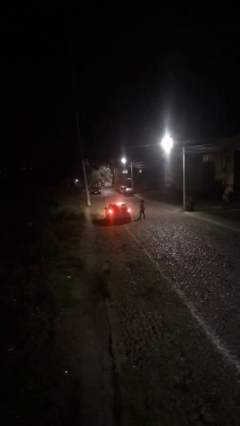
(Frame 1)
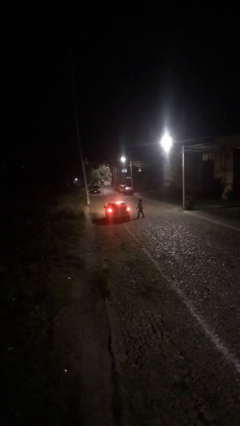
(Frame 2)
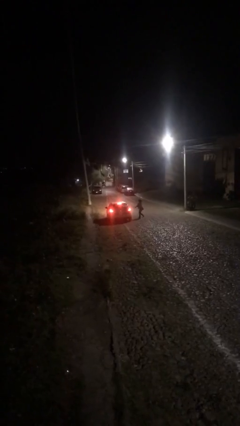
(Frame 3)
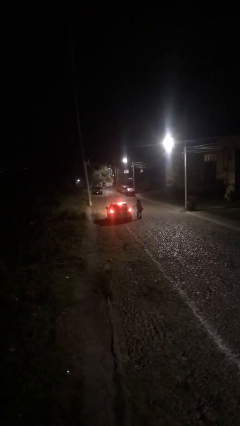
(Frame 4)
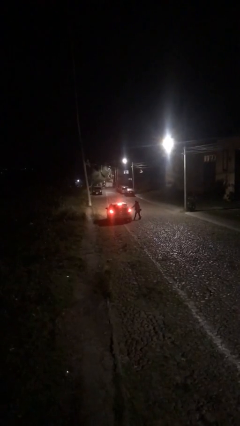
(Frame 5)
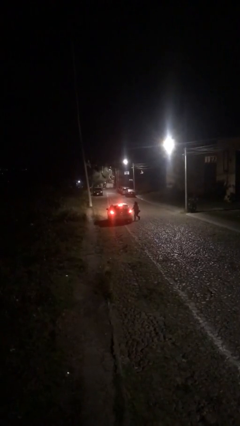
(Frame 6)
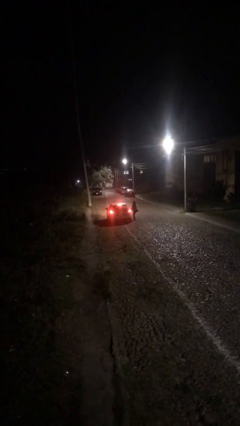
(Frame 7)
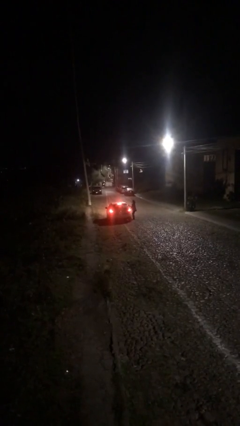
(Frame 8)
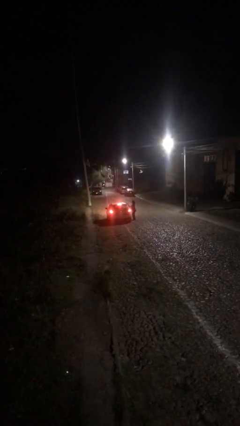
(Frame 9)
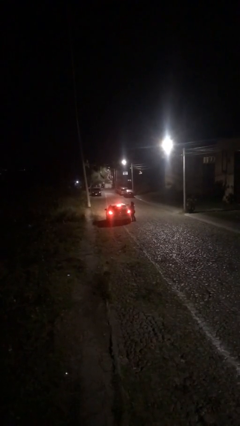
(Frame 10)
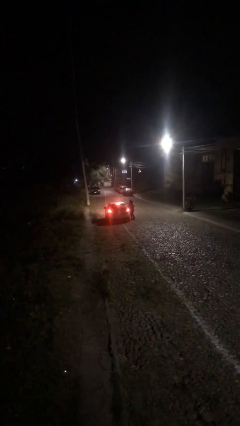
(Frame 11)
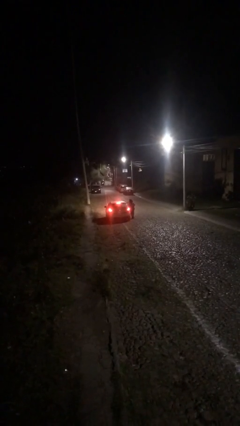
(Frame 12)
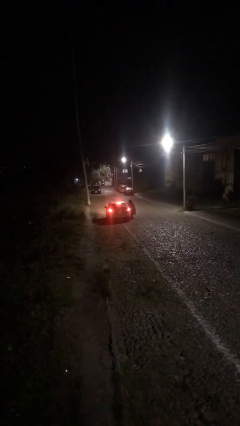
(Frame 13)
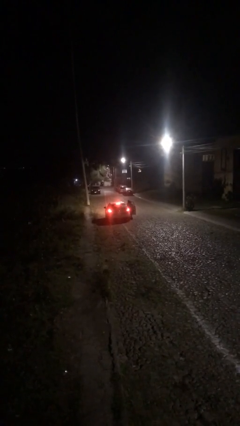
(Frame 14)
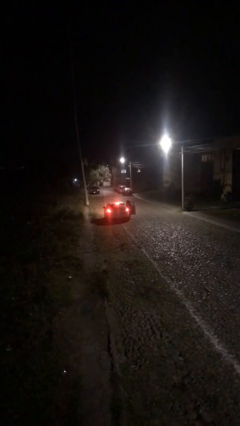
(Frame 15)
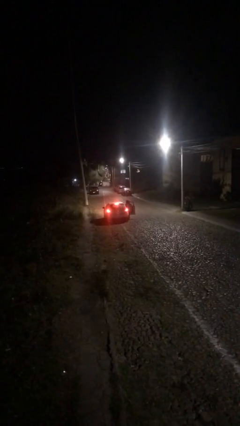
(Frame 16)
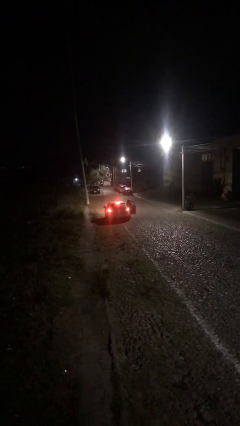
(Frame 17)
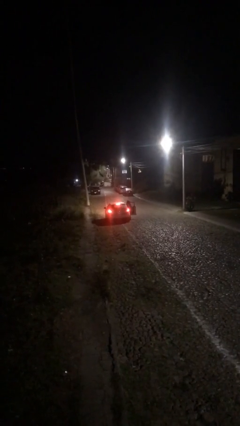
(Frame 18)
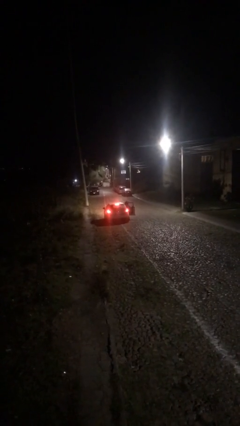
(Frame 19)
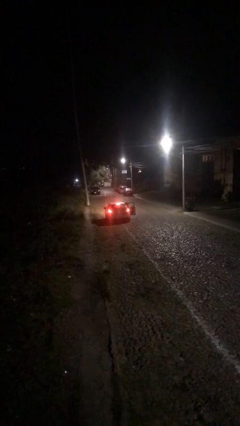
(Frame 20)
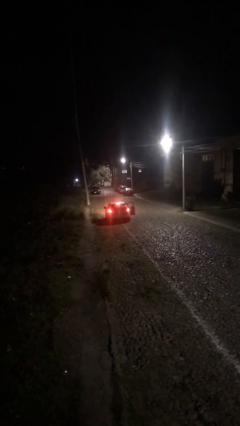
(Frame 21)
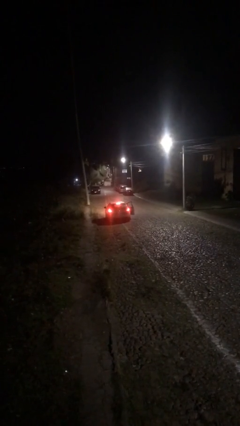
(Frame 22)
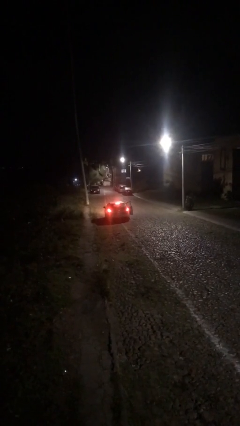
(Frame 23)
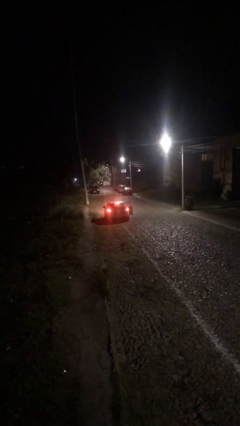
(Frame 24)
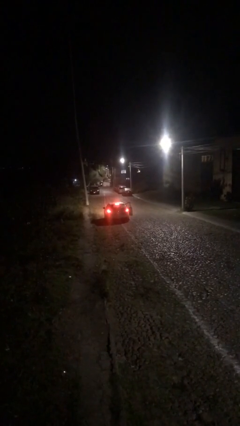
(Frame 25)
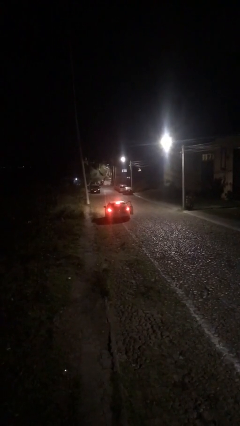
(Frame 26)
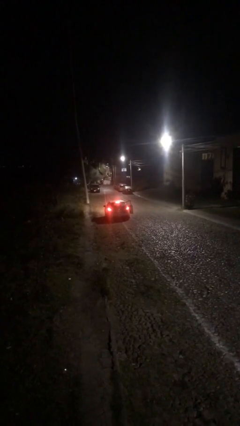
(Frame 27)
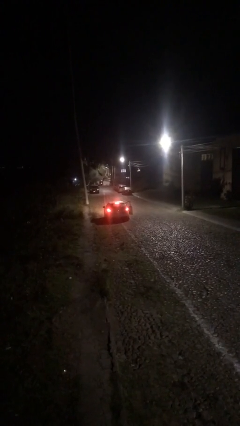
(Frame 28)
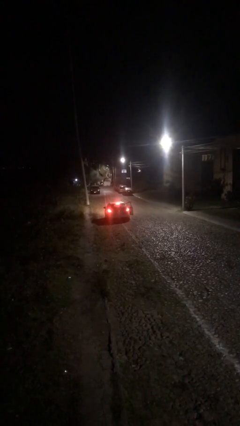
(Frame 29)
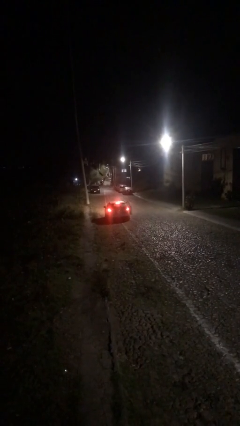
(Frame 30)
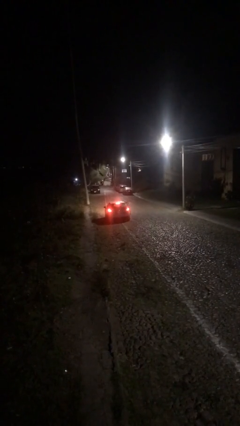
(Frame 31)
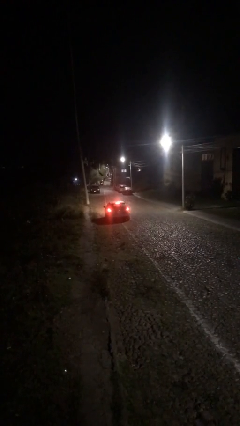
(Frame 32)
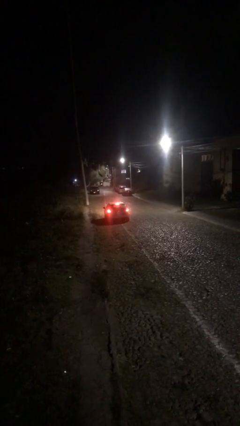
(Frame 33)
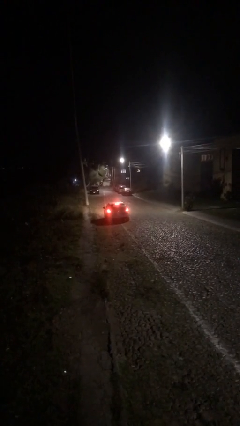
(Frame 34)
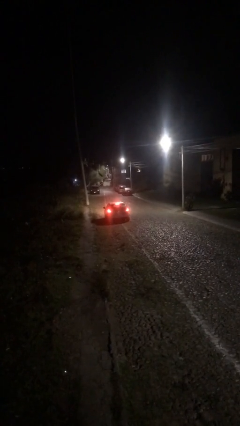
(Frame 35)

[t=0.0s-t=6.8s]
car picks up person

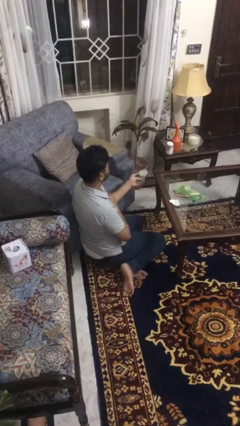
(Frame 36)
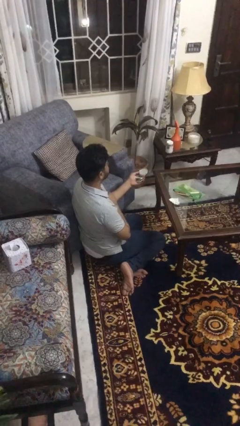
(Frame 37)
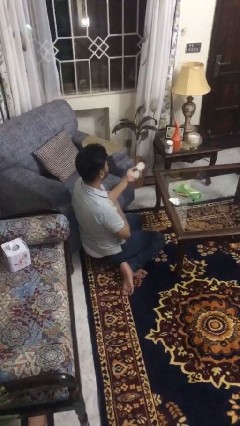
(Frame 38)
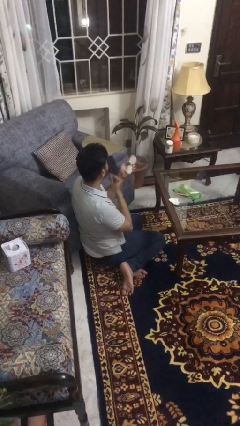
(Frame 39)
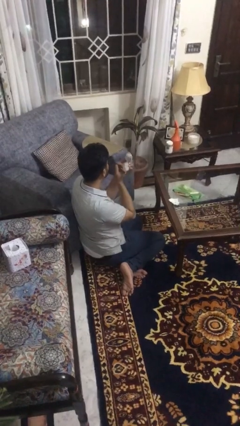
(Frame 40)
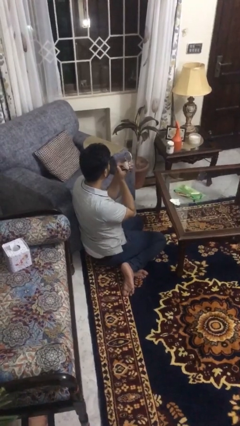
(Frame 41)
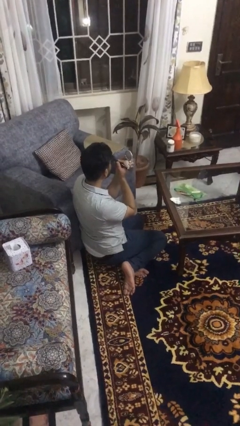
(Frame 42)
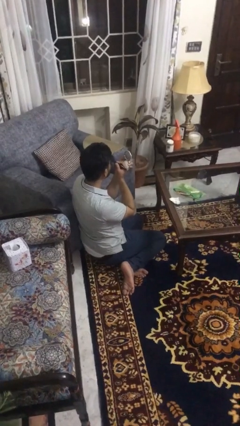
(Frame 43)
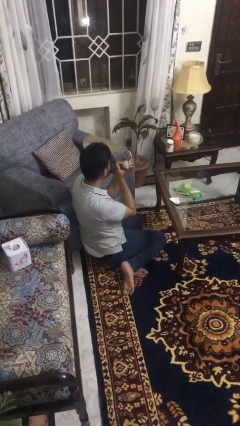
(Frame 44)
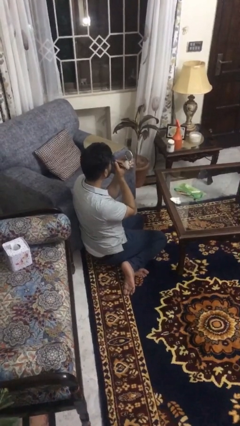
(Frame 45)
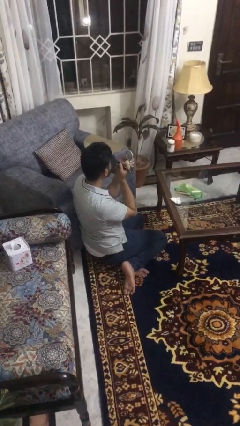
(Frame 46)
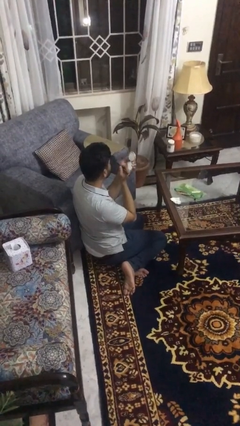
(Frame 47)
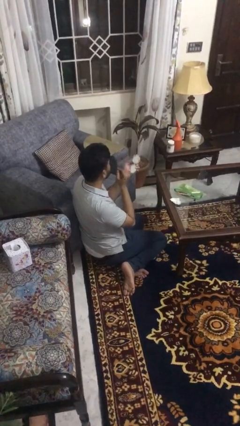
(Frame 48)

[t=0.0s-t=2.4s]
person applies eye makeup

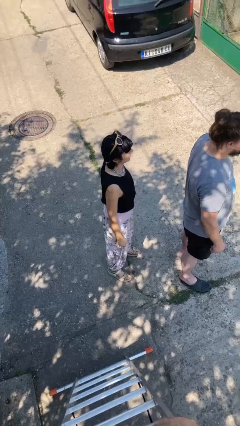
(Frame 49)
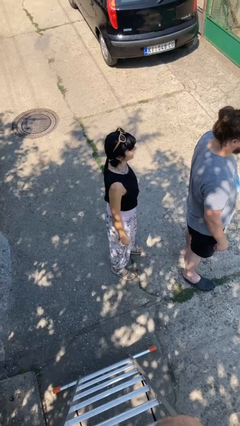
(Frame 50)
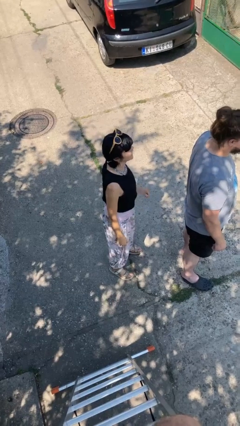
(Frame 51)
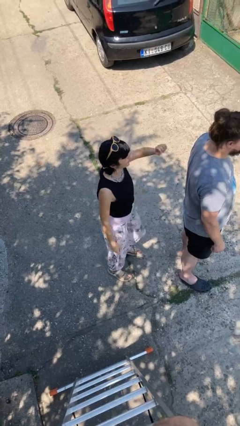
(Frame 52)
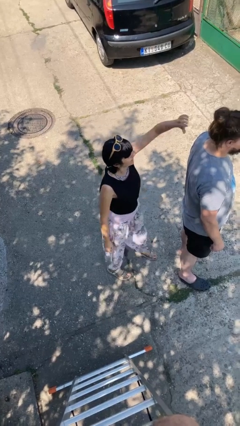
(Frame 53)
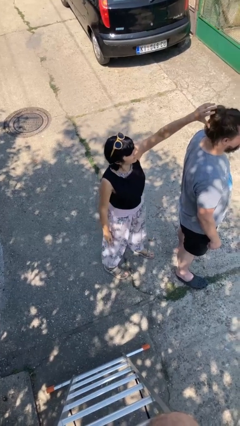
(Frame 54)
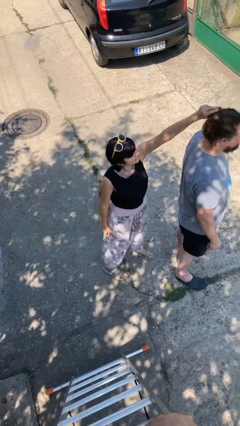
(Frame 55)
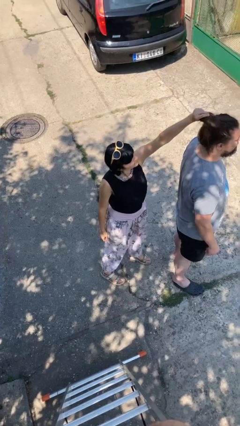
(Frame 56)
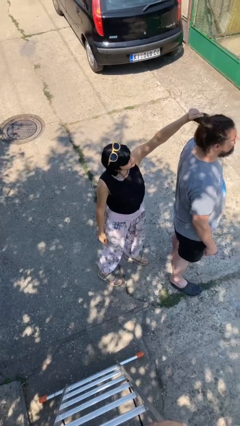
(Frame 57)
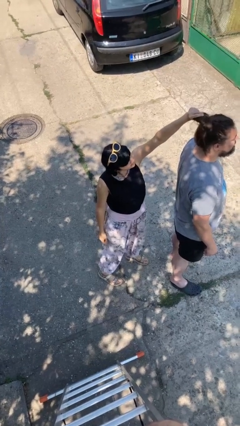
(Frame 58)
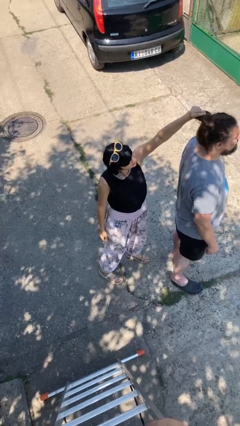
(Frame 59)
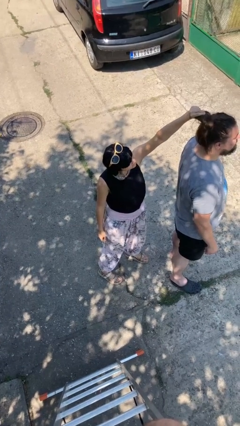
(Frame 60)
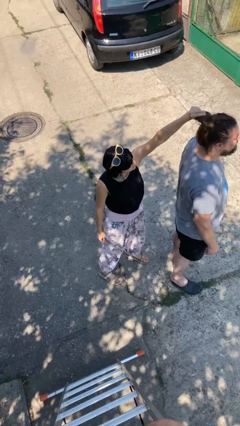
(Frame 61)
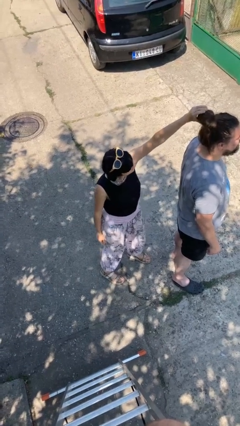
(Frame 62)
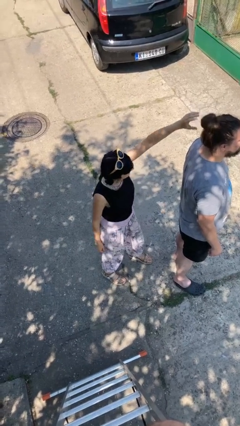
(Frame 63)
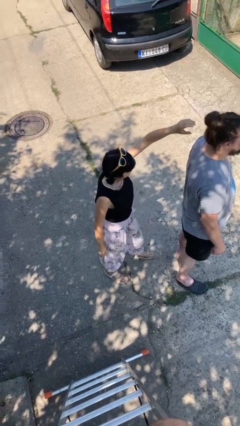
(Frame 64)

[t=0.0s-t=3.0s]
person grabs person by hair

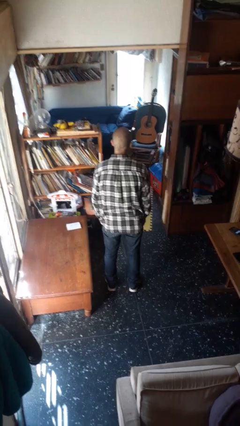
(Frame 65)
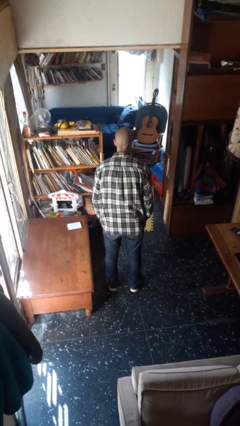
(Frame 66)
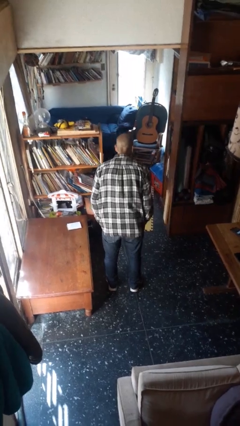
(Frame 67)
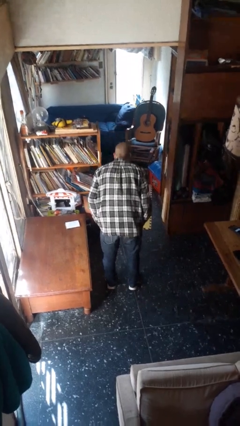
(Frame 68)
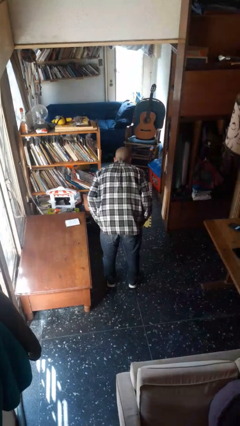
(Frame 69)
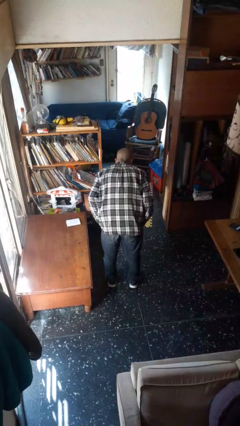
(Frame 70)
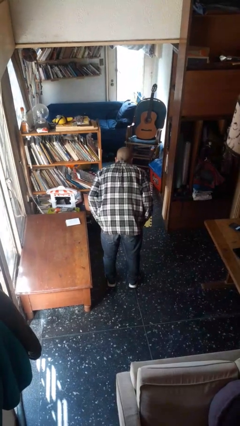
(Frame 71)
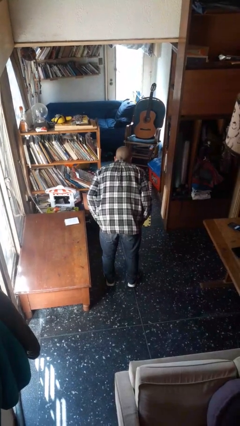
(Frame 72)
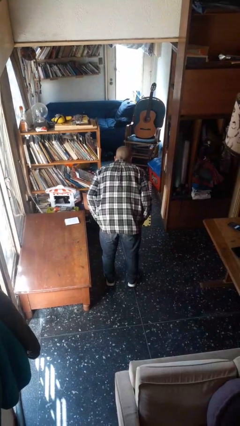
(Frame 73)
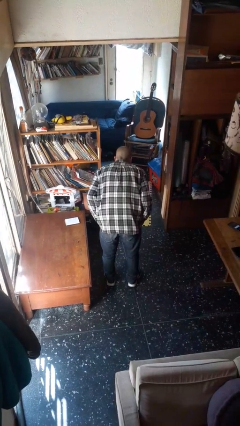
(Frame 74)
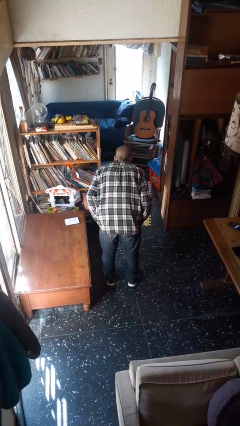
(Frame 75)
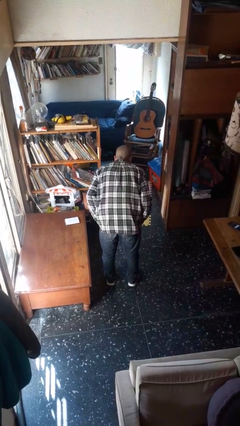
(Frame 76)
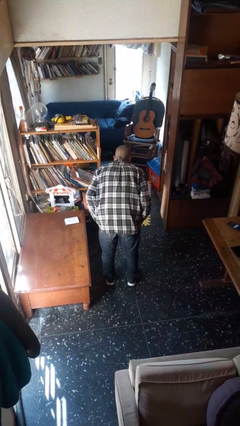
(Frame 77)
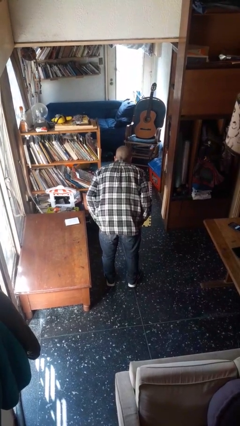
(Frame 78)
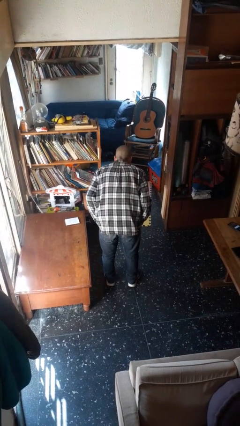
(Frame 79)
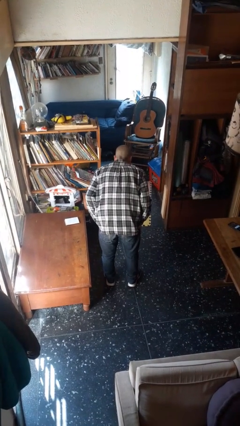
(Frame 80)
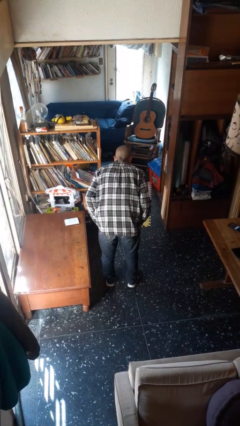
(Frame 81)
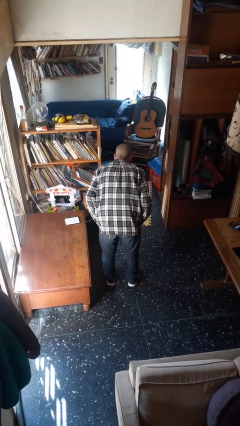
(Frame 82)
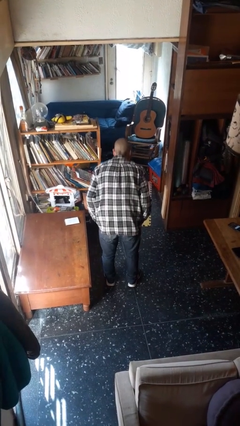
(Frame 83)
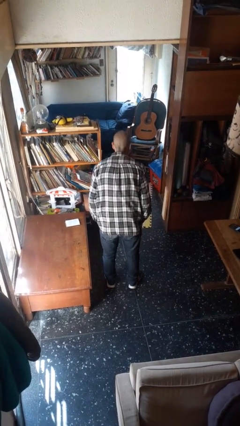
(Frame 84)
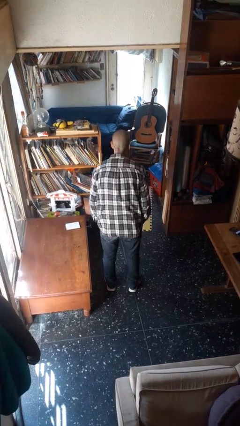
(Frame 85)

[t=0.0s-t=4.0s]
person bows

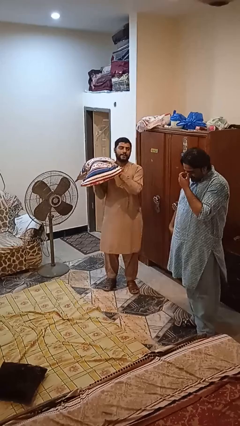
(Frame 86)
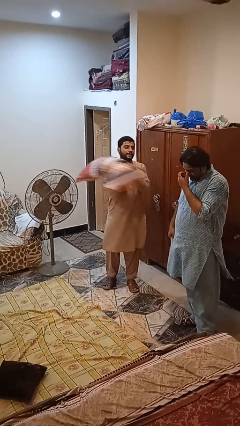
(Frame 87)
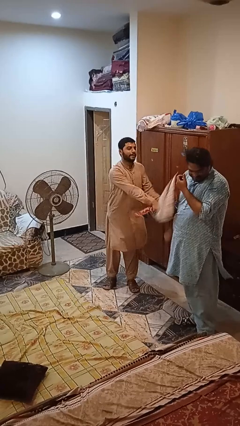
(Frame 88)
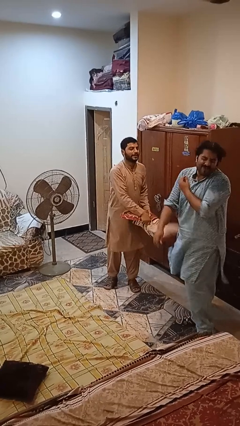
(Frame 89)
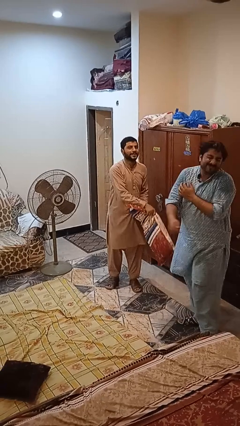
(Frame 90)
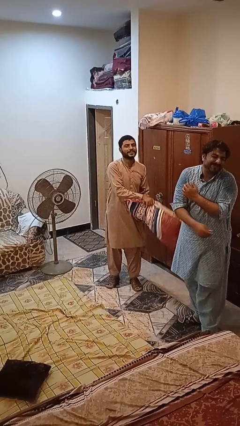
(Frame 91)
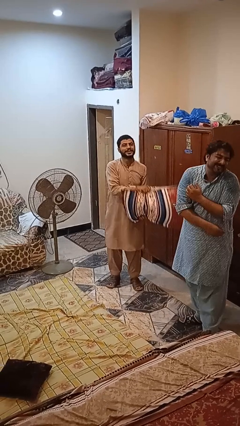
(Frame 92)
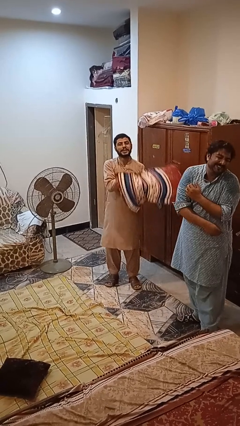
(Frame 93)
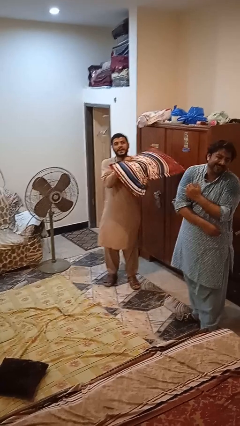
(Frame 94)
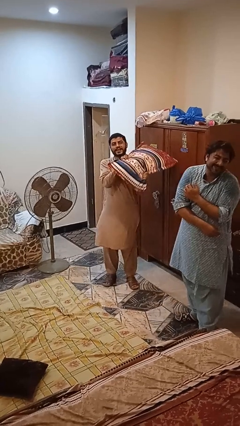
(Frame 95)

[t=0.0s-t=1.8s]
person hits person with pillow

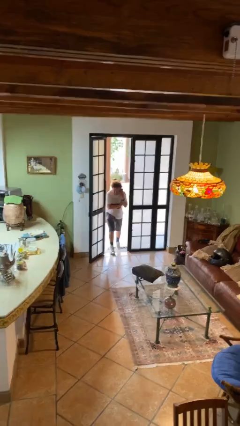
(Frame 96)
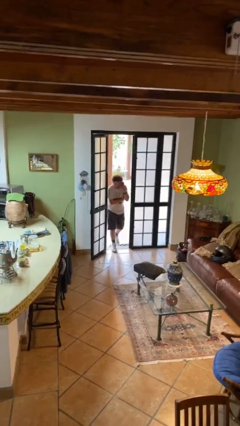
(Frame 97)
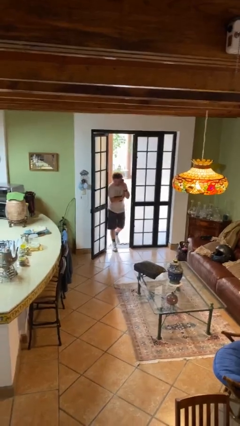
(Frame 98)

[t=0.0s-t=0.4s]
person enters scene through structure
